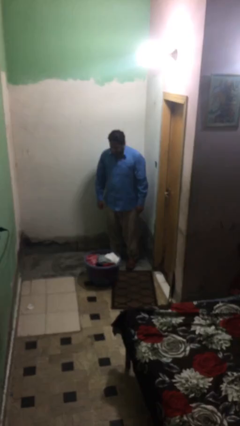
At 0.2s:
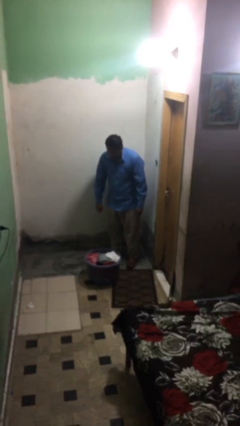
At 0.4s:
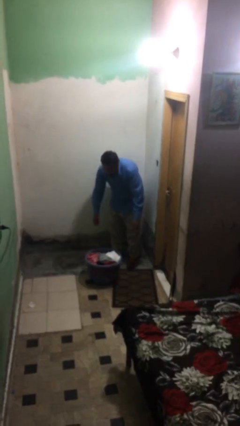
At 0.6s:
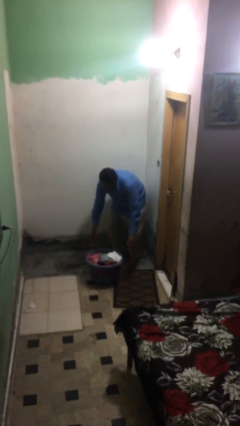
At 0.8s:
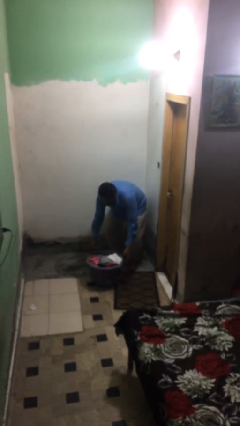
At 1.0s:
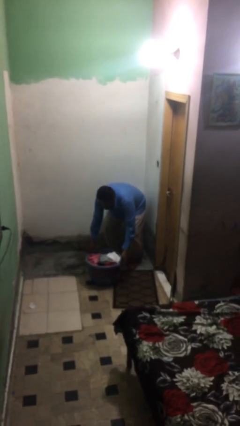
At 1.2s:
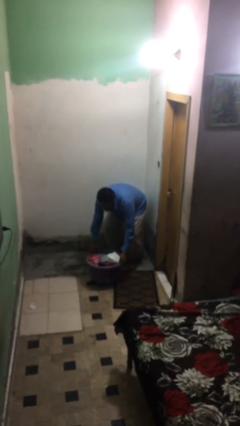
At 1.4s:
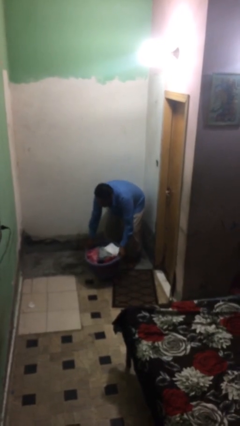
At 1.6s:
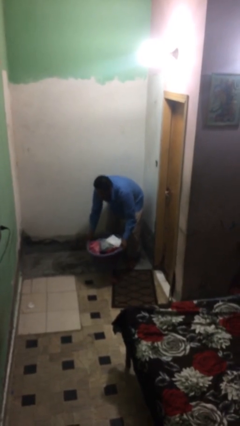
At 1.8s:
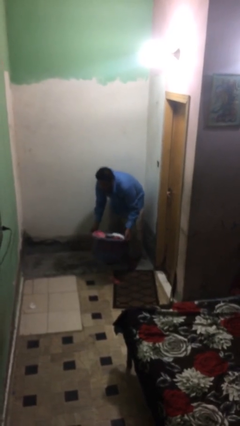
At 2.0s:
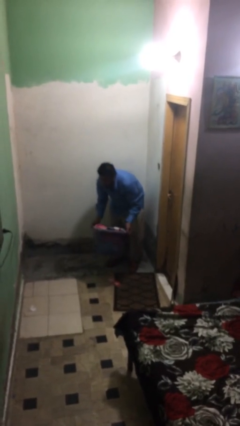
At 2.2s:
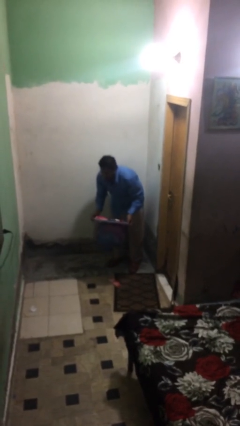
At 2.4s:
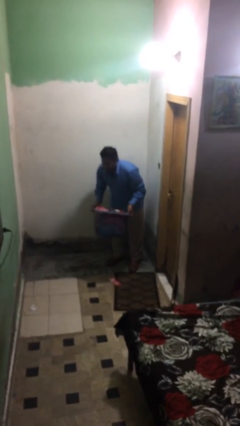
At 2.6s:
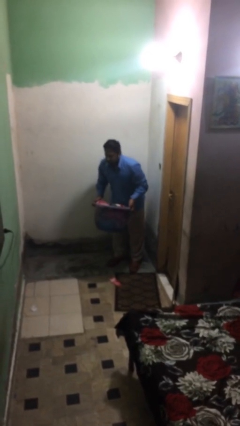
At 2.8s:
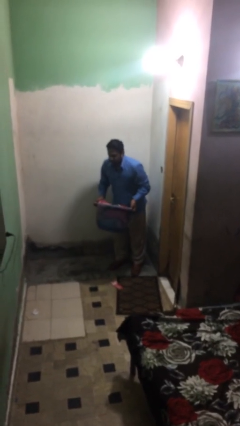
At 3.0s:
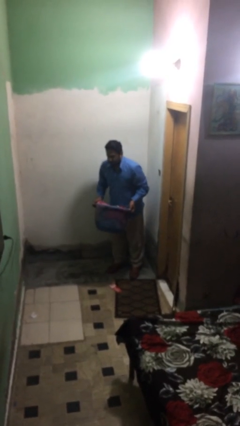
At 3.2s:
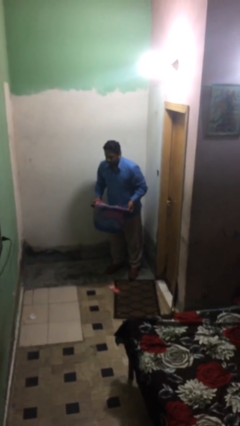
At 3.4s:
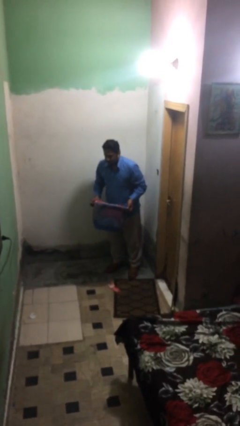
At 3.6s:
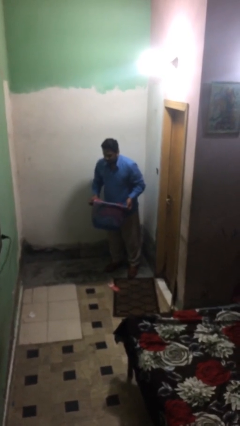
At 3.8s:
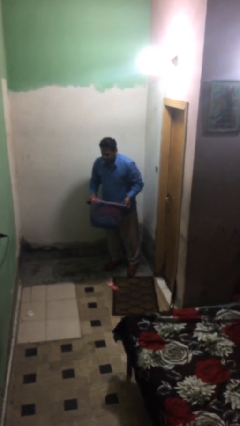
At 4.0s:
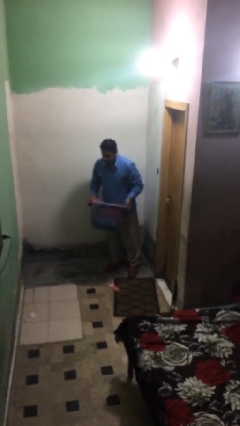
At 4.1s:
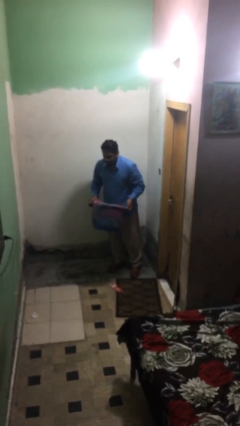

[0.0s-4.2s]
person picks up object from floor

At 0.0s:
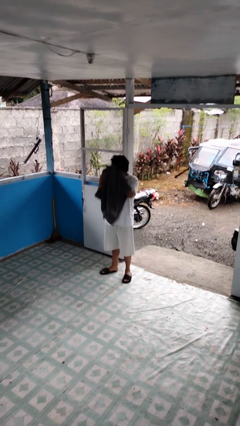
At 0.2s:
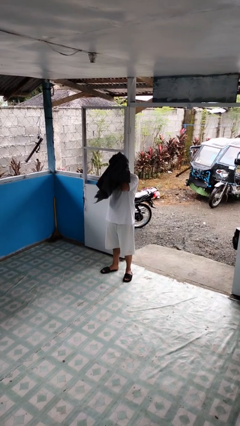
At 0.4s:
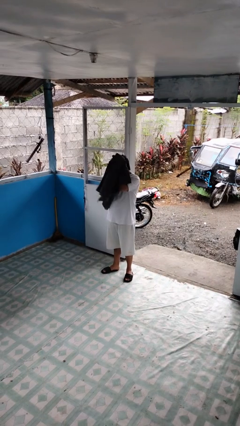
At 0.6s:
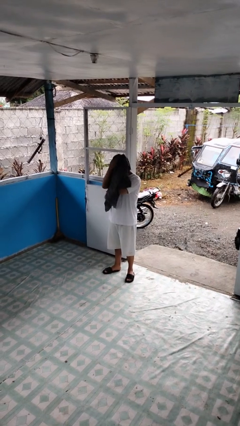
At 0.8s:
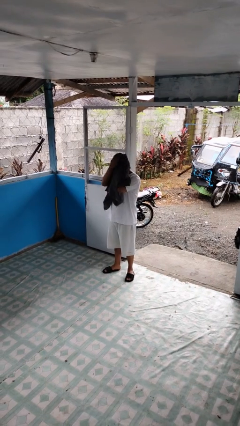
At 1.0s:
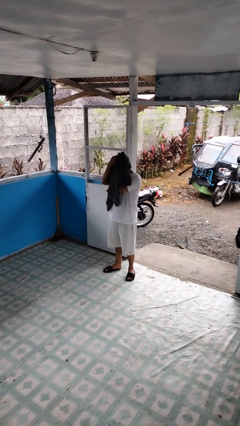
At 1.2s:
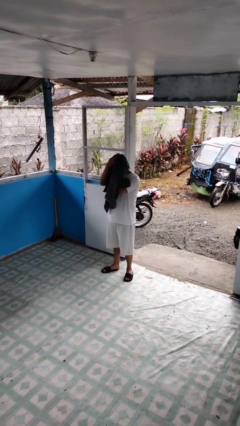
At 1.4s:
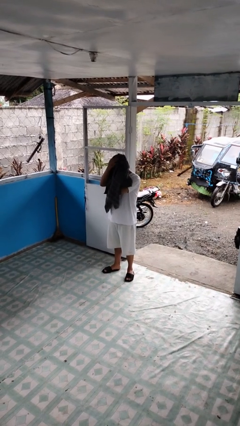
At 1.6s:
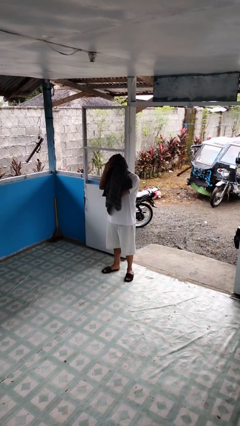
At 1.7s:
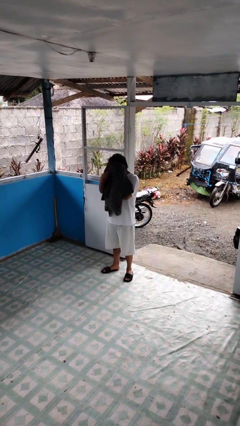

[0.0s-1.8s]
person dries hair with towel

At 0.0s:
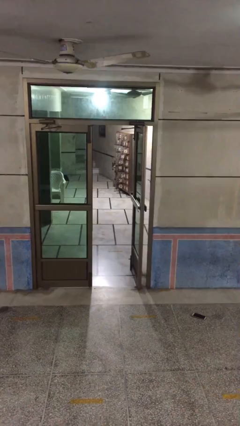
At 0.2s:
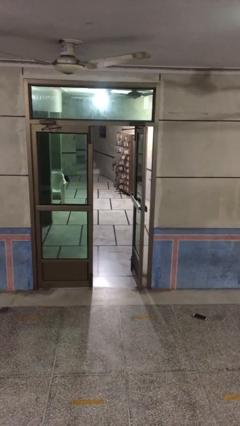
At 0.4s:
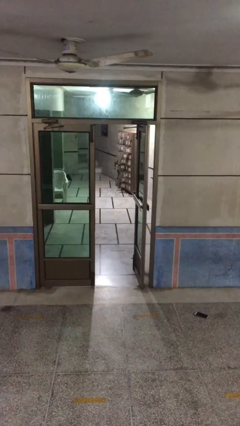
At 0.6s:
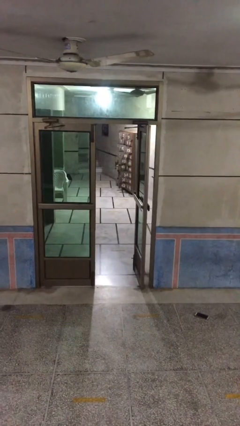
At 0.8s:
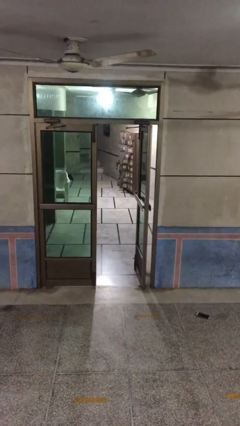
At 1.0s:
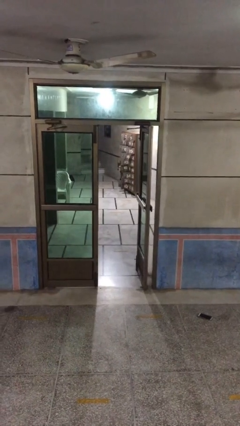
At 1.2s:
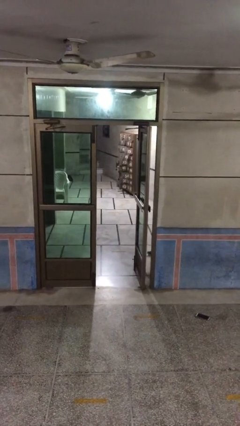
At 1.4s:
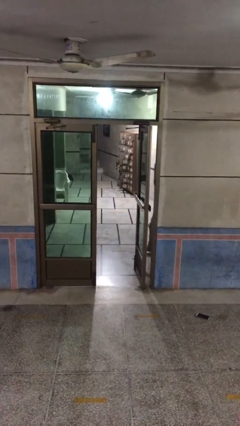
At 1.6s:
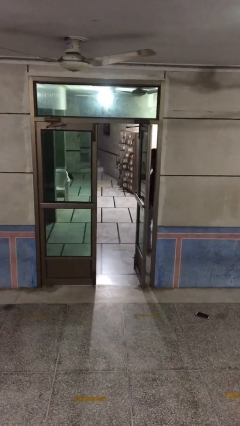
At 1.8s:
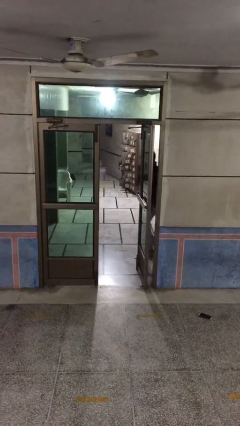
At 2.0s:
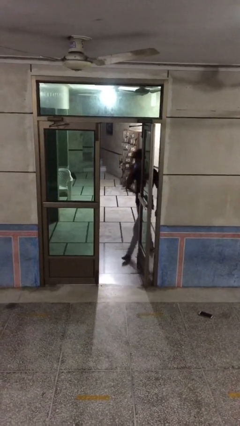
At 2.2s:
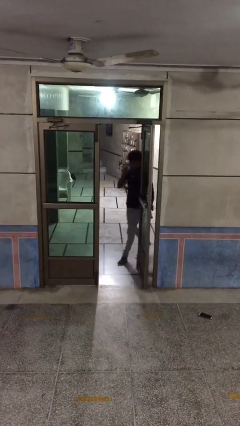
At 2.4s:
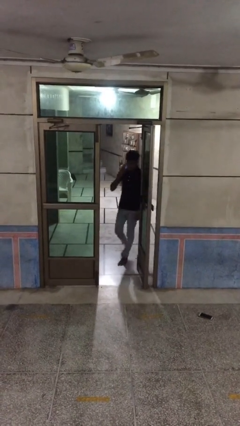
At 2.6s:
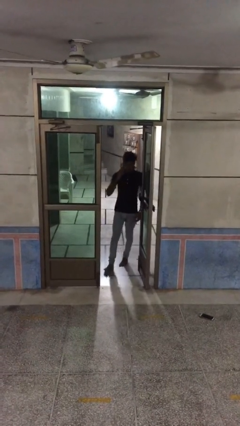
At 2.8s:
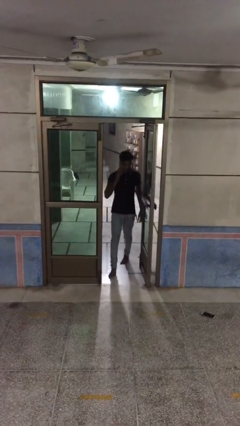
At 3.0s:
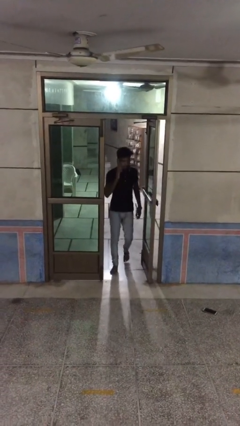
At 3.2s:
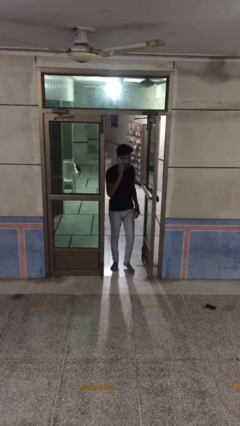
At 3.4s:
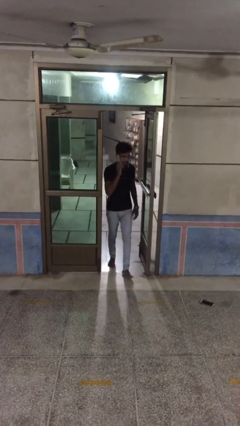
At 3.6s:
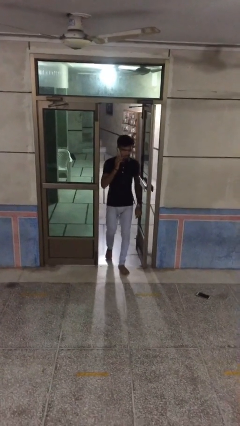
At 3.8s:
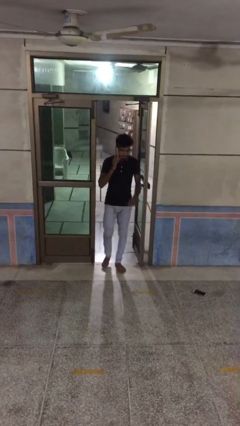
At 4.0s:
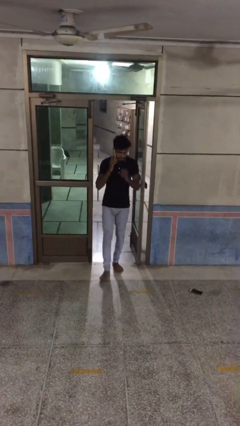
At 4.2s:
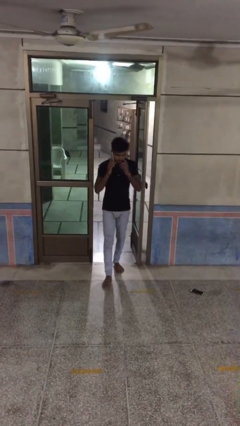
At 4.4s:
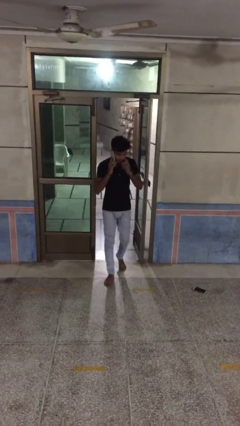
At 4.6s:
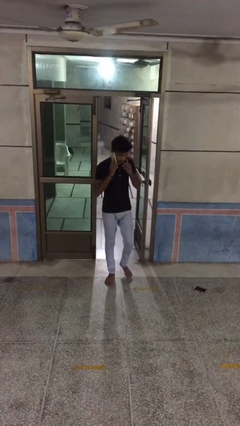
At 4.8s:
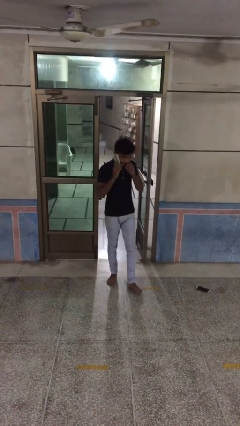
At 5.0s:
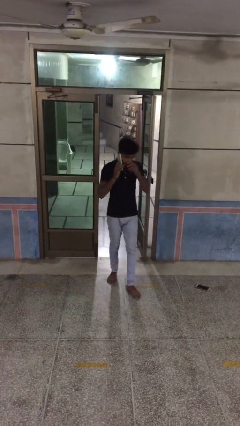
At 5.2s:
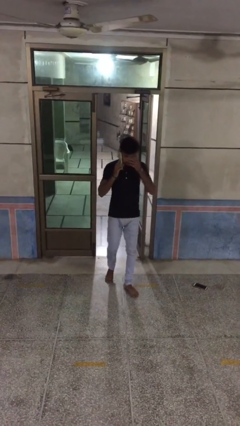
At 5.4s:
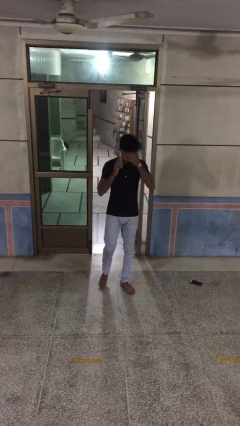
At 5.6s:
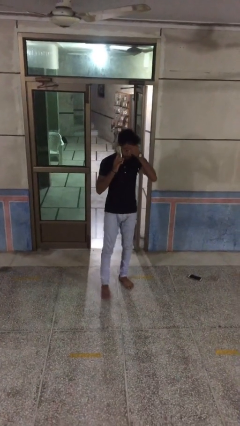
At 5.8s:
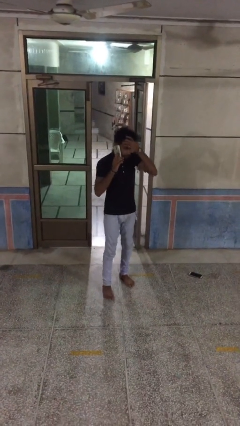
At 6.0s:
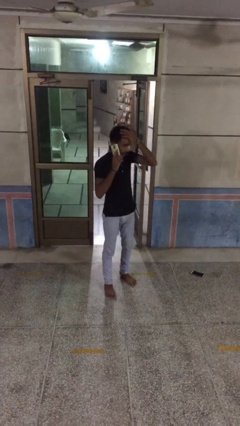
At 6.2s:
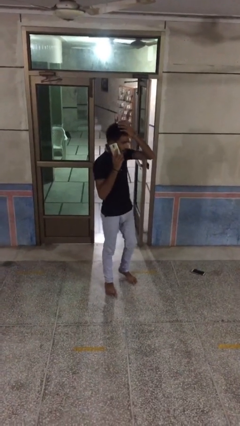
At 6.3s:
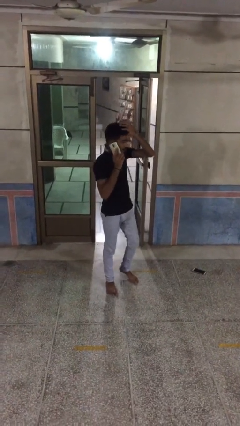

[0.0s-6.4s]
person enters scene through structure

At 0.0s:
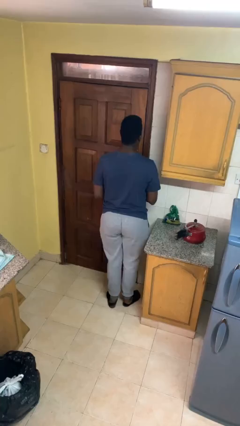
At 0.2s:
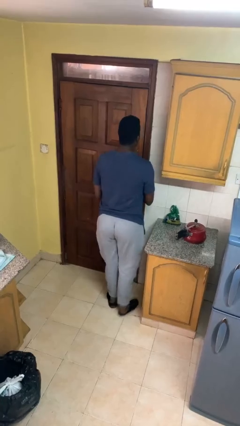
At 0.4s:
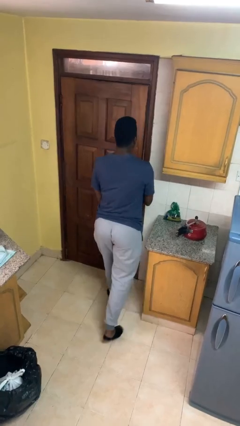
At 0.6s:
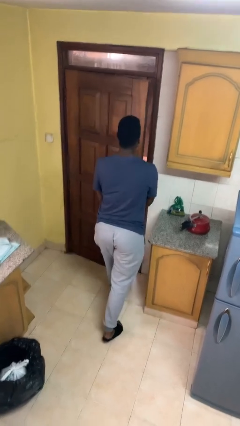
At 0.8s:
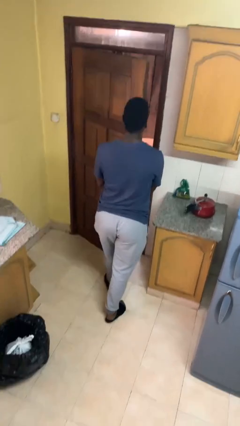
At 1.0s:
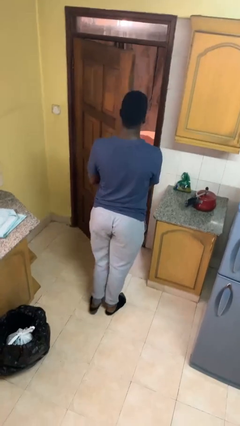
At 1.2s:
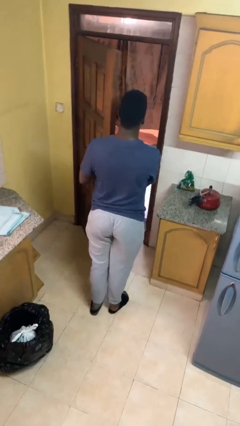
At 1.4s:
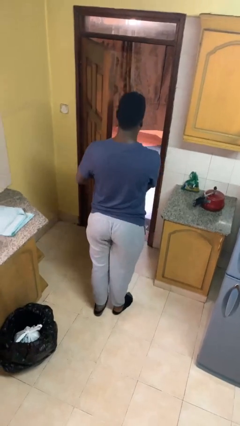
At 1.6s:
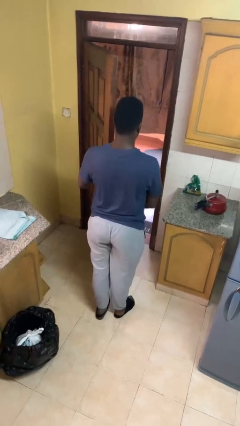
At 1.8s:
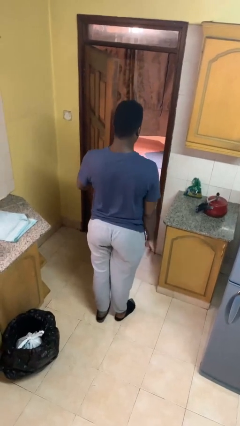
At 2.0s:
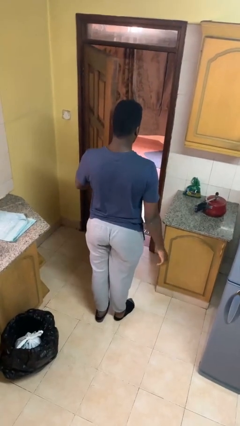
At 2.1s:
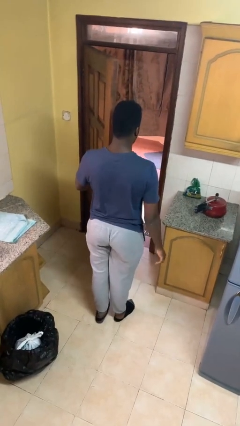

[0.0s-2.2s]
person opens facility door

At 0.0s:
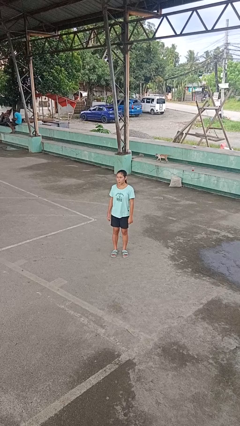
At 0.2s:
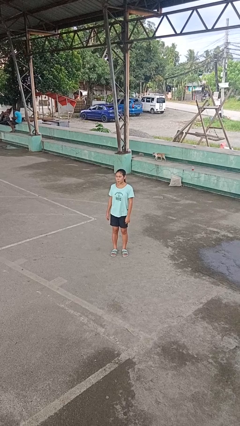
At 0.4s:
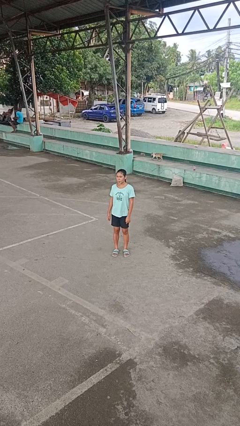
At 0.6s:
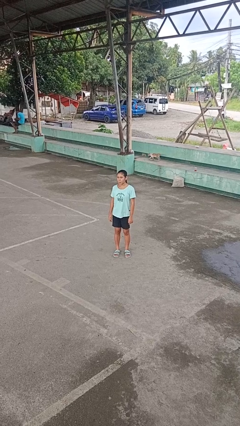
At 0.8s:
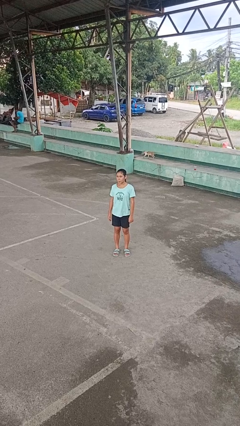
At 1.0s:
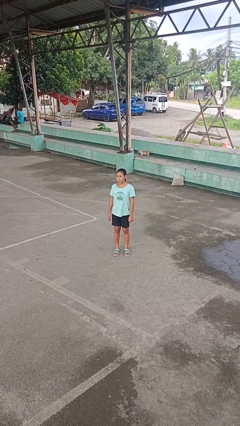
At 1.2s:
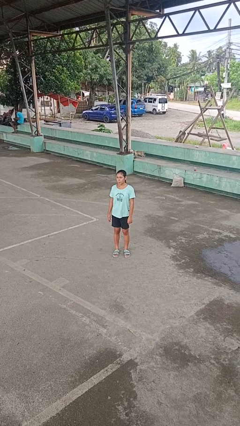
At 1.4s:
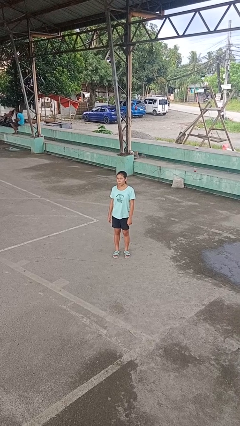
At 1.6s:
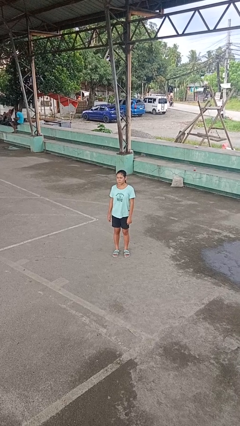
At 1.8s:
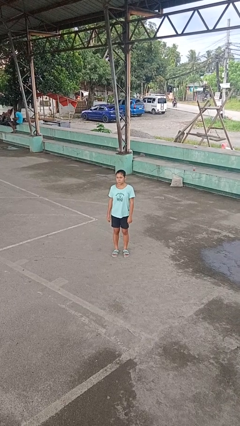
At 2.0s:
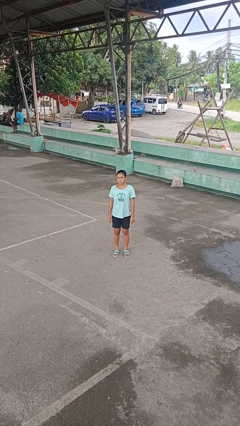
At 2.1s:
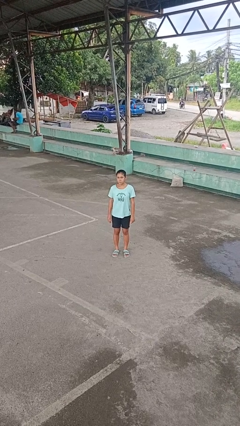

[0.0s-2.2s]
person sticks out tongue

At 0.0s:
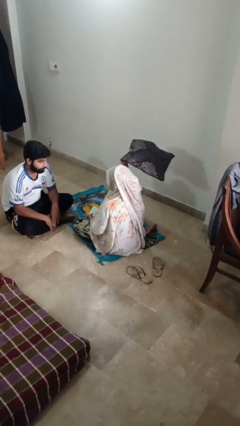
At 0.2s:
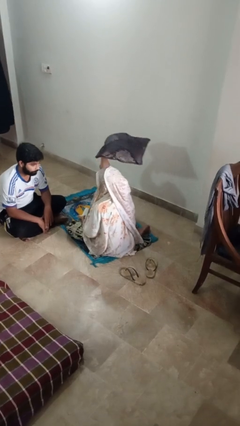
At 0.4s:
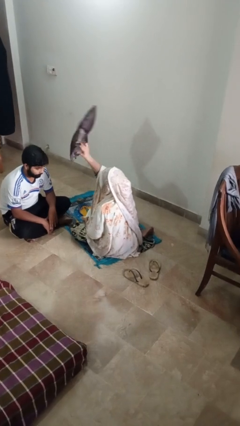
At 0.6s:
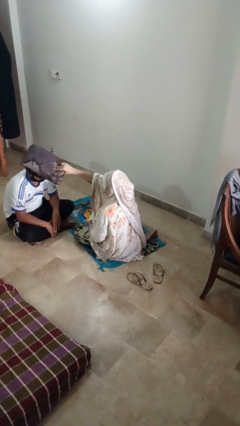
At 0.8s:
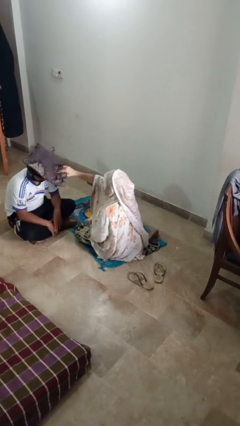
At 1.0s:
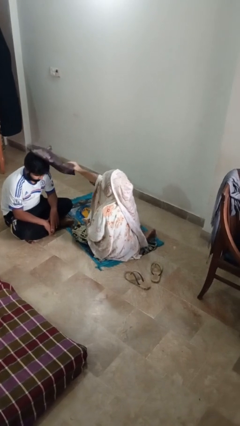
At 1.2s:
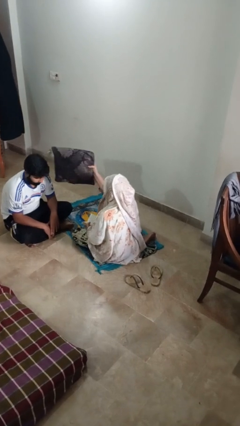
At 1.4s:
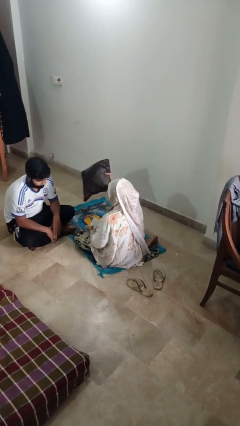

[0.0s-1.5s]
person hits person with pillow
